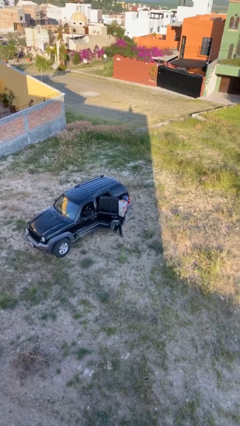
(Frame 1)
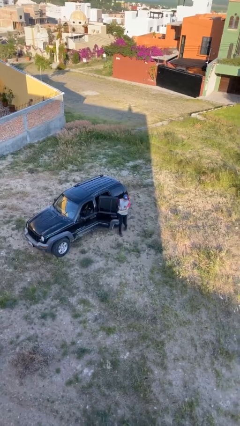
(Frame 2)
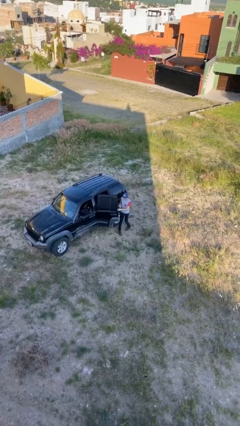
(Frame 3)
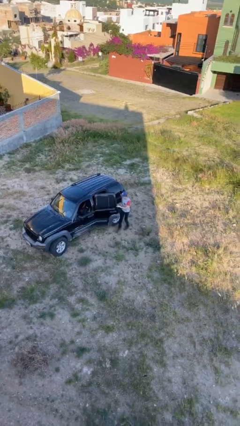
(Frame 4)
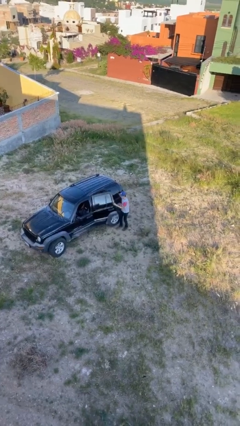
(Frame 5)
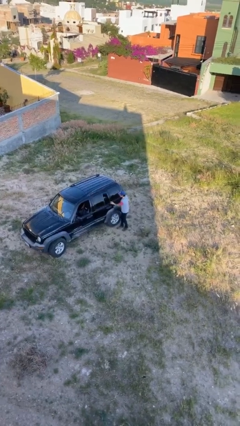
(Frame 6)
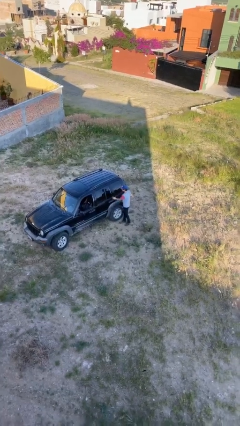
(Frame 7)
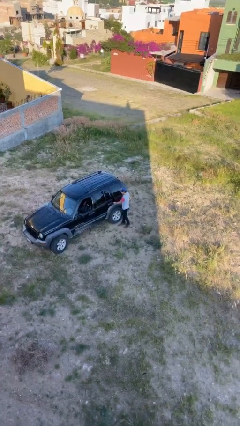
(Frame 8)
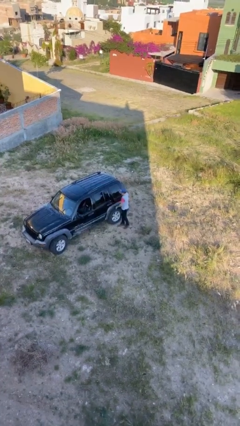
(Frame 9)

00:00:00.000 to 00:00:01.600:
person exits car

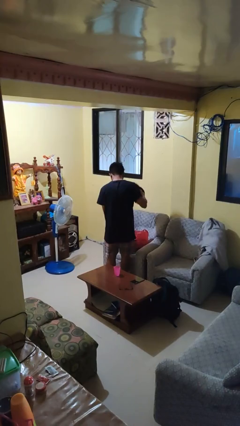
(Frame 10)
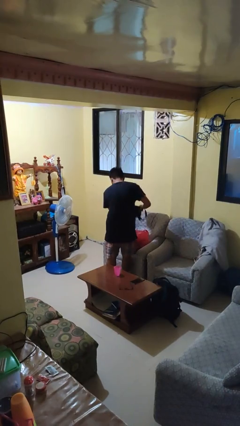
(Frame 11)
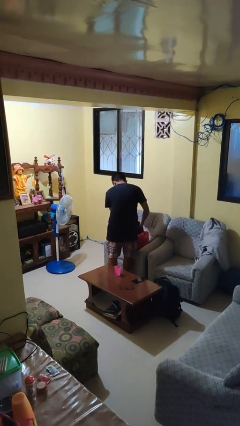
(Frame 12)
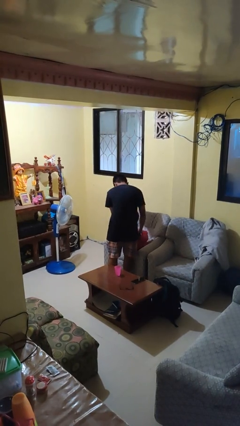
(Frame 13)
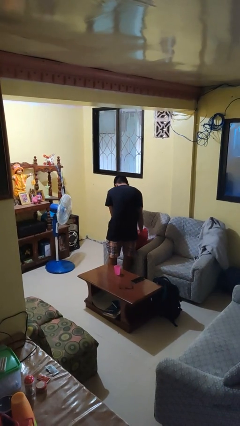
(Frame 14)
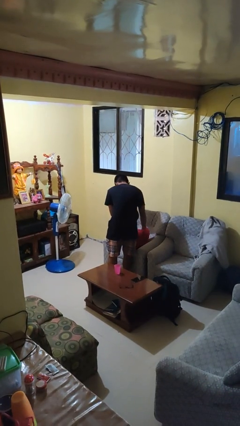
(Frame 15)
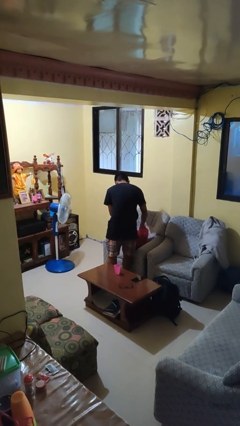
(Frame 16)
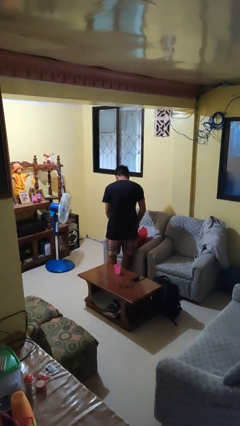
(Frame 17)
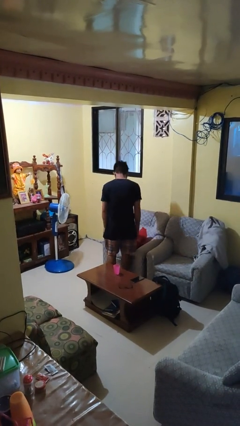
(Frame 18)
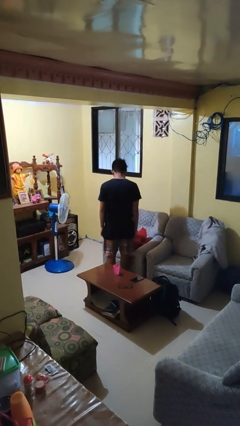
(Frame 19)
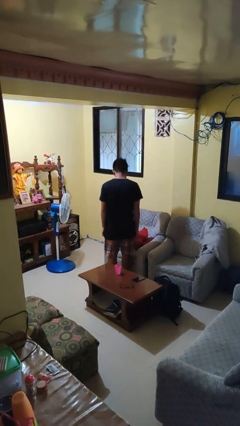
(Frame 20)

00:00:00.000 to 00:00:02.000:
person puts object into bag

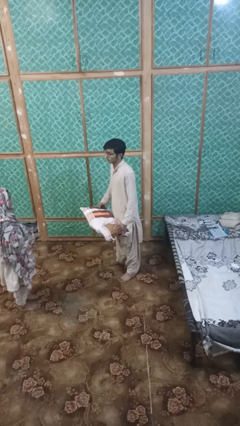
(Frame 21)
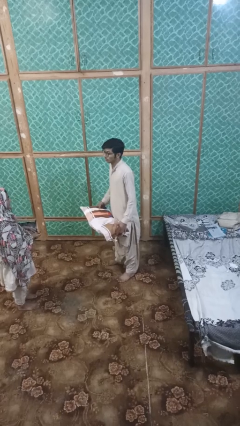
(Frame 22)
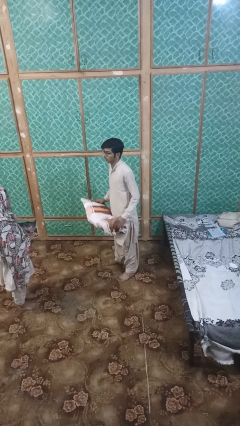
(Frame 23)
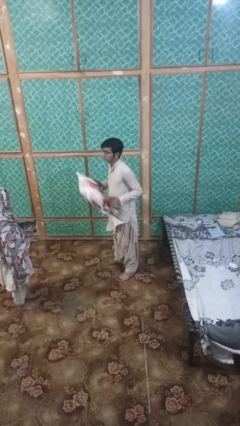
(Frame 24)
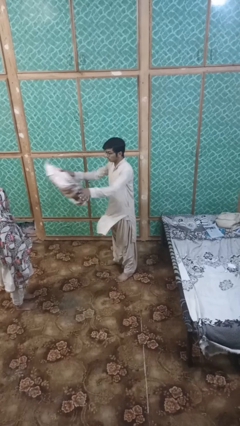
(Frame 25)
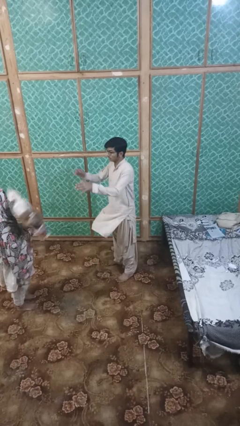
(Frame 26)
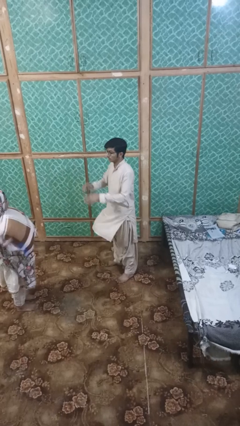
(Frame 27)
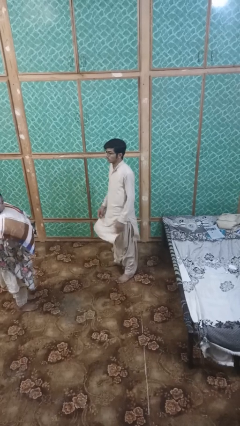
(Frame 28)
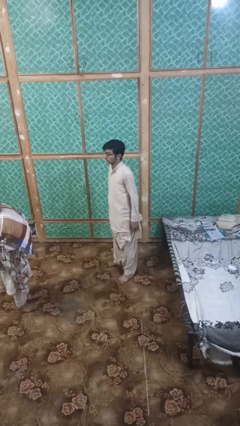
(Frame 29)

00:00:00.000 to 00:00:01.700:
person throws object to person

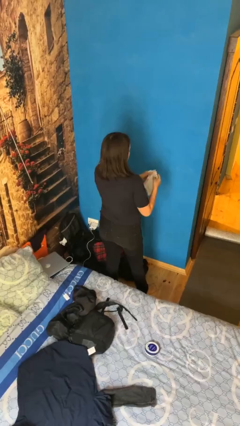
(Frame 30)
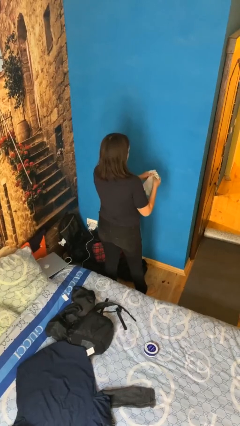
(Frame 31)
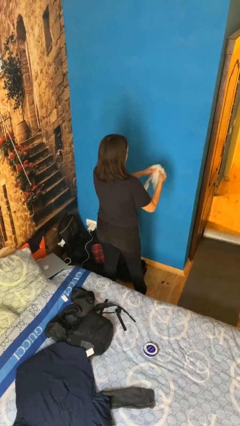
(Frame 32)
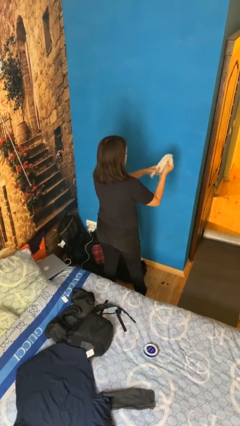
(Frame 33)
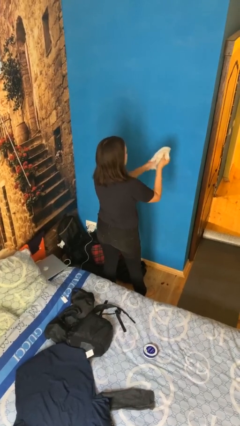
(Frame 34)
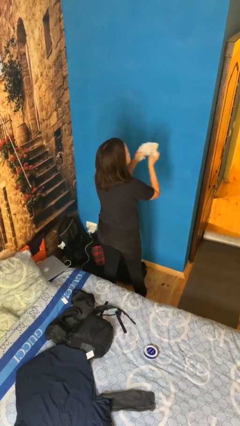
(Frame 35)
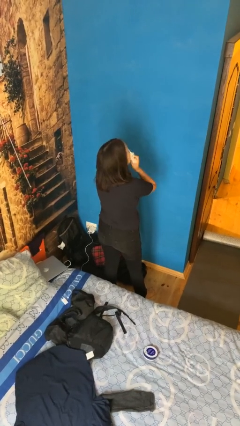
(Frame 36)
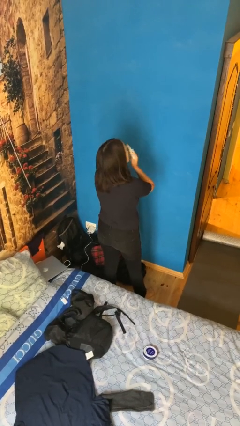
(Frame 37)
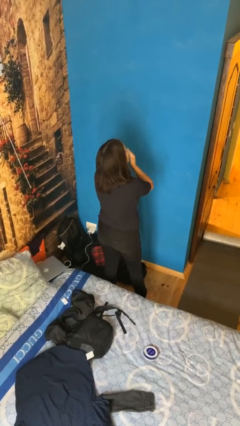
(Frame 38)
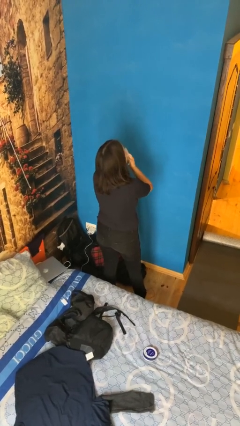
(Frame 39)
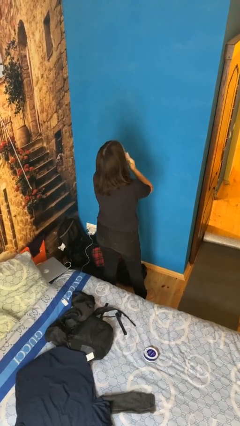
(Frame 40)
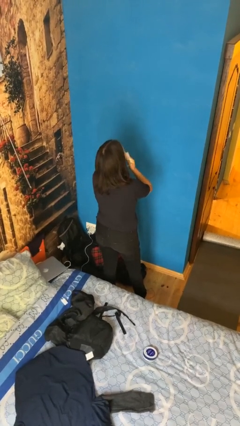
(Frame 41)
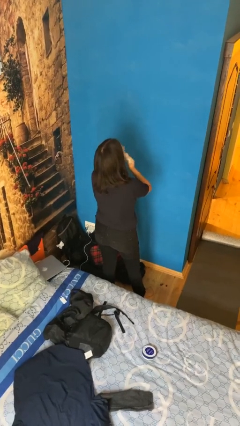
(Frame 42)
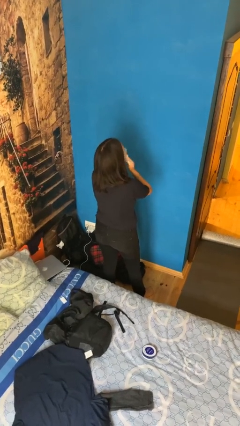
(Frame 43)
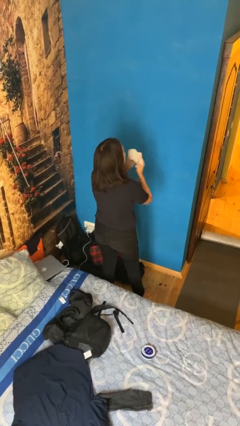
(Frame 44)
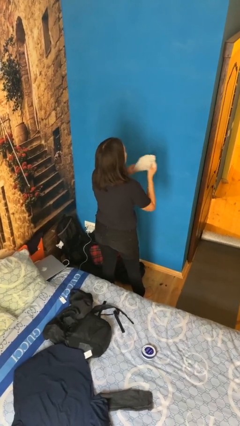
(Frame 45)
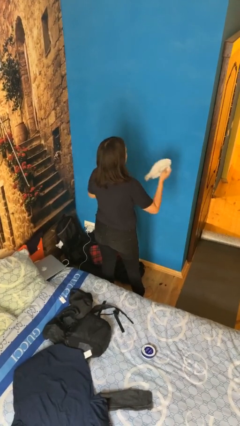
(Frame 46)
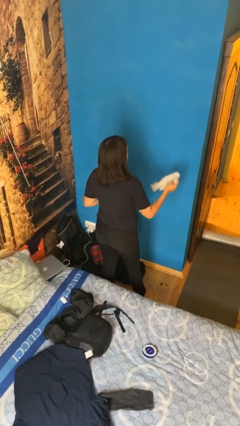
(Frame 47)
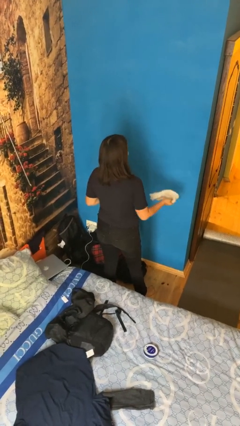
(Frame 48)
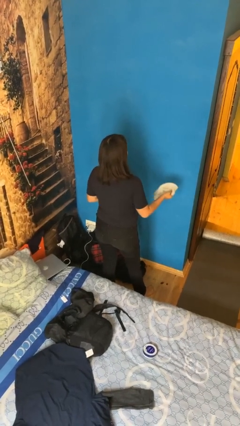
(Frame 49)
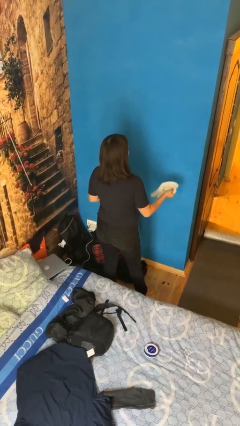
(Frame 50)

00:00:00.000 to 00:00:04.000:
person wipes mouth with napkin

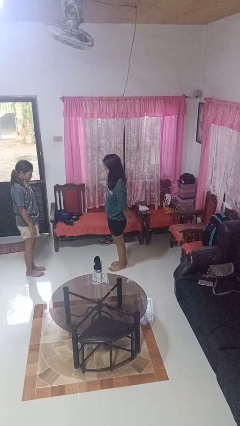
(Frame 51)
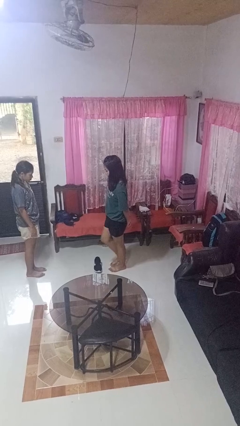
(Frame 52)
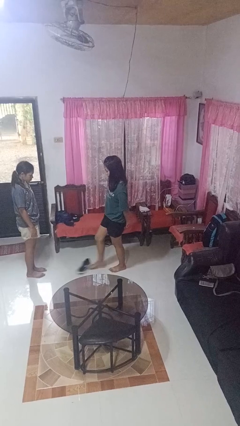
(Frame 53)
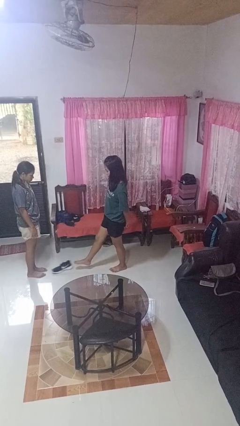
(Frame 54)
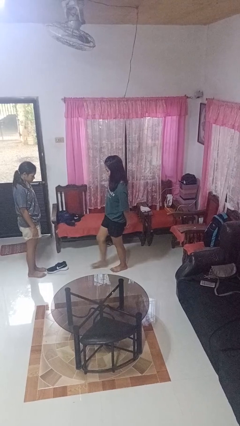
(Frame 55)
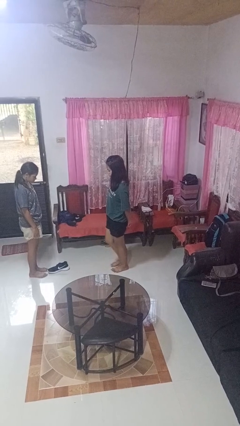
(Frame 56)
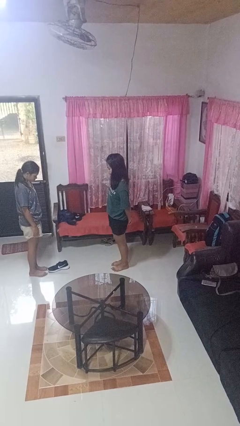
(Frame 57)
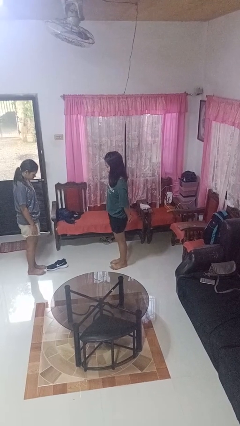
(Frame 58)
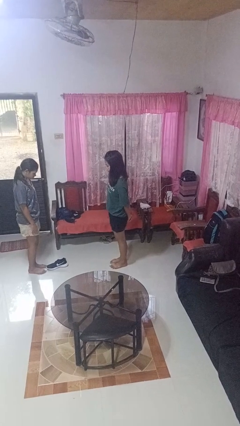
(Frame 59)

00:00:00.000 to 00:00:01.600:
person kicks object to person

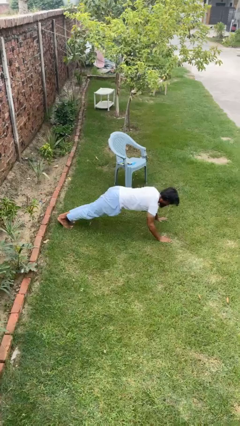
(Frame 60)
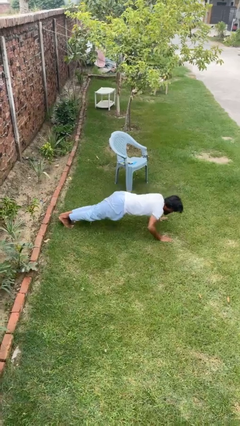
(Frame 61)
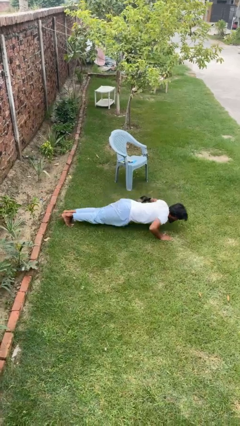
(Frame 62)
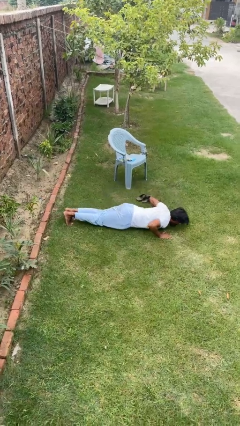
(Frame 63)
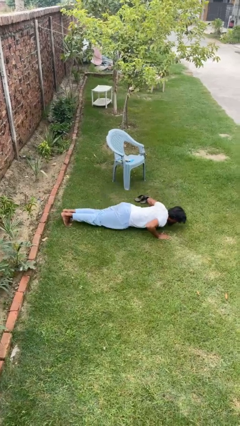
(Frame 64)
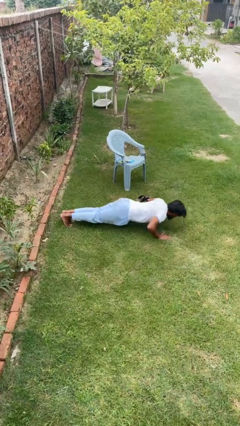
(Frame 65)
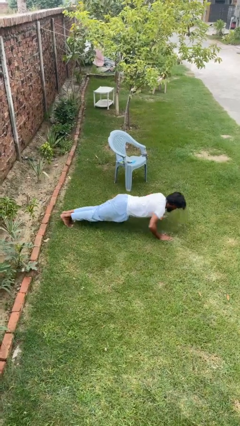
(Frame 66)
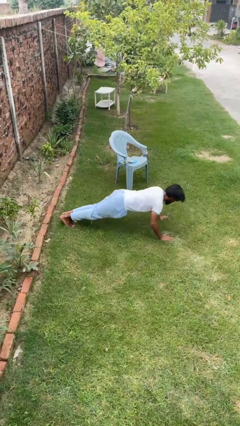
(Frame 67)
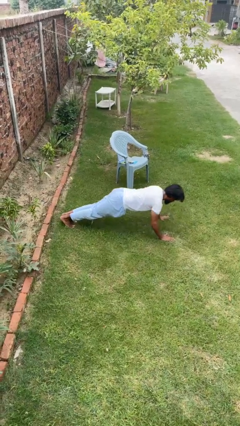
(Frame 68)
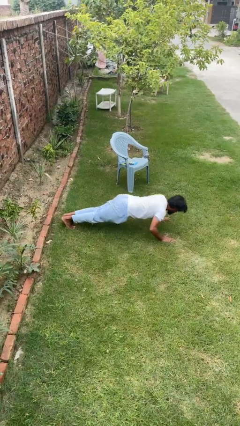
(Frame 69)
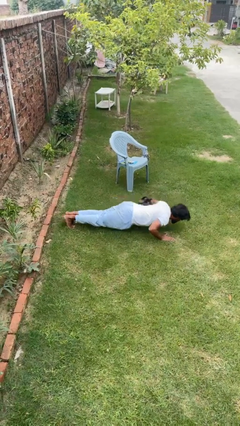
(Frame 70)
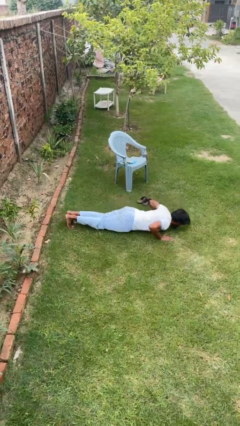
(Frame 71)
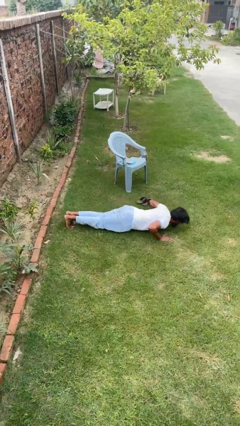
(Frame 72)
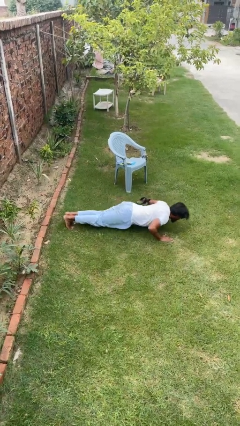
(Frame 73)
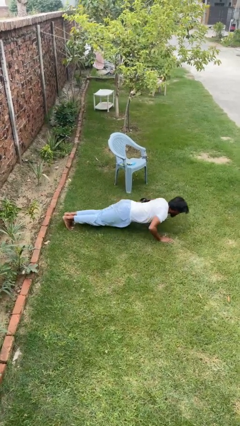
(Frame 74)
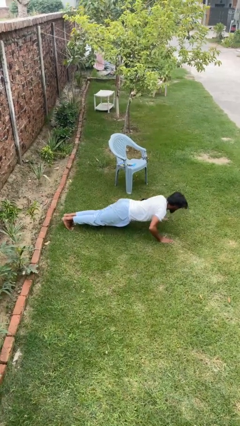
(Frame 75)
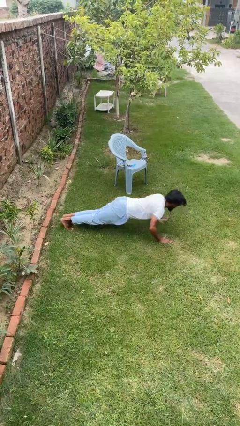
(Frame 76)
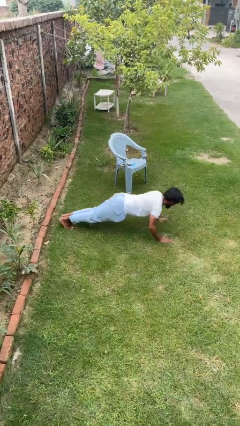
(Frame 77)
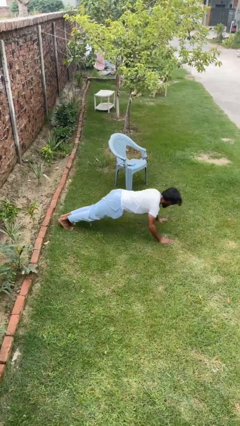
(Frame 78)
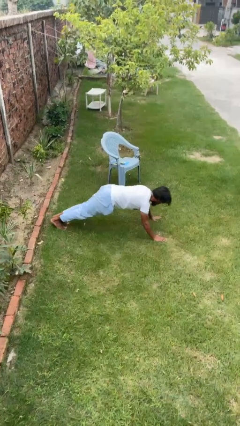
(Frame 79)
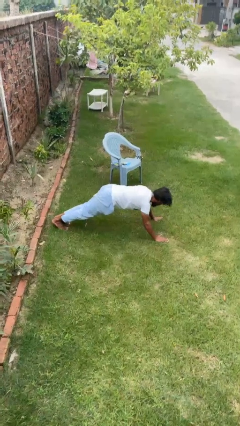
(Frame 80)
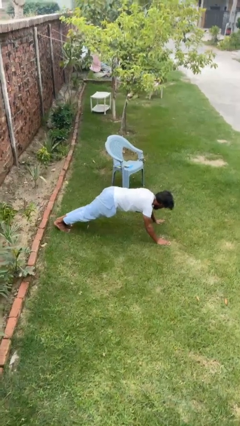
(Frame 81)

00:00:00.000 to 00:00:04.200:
person exercises with pushup

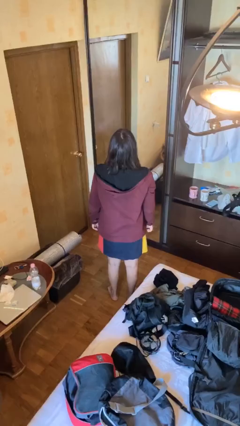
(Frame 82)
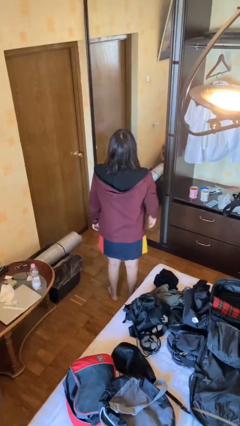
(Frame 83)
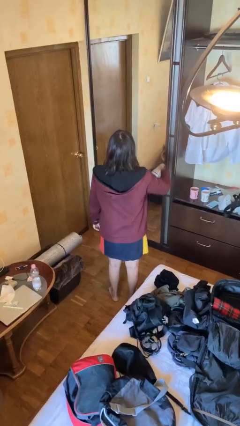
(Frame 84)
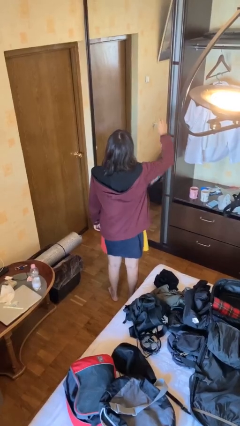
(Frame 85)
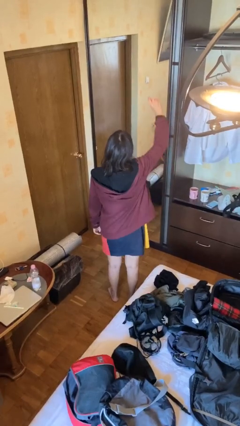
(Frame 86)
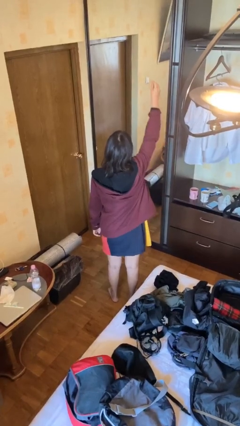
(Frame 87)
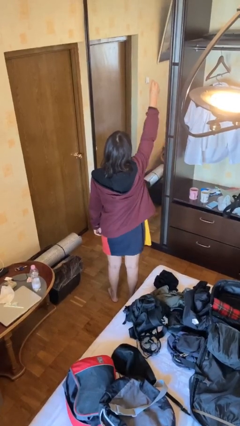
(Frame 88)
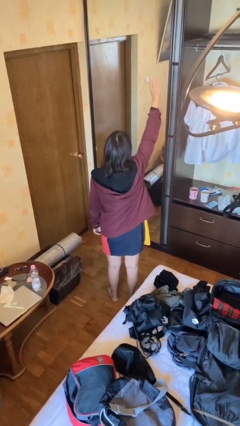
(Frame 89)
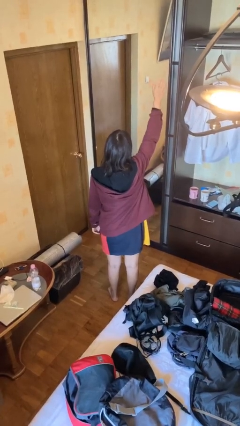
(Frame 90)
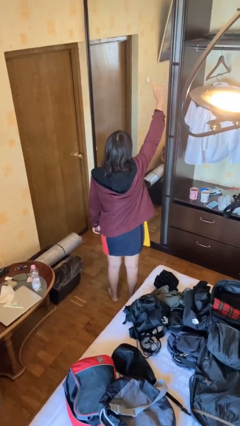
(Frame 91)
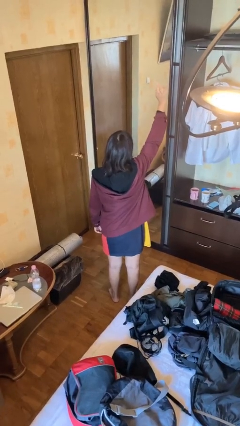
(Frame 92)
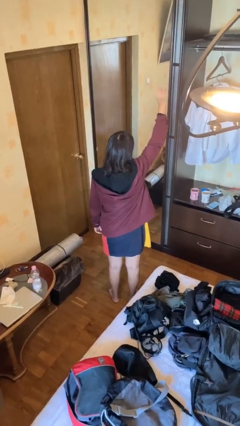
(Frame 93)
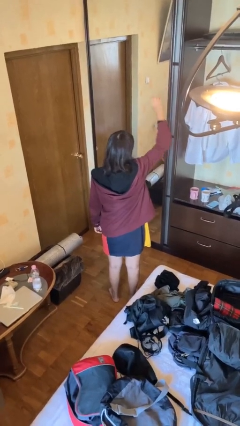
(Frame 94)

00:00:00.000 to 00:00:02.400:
person gestures raise hand
